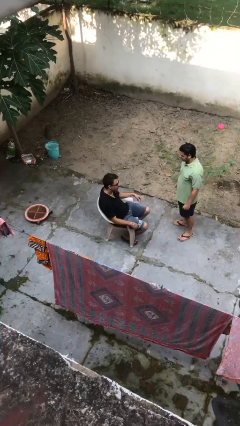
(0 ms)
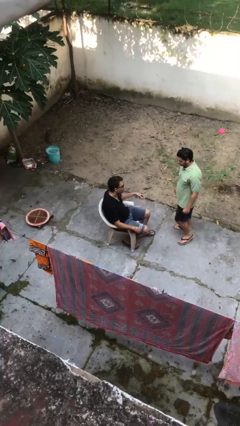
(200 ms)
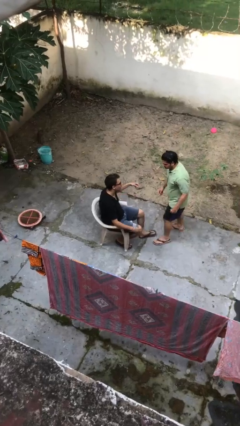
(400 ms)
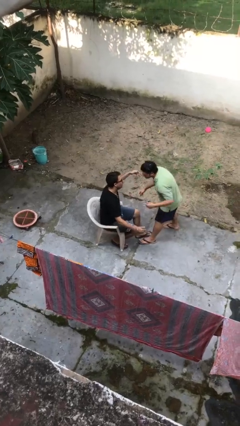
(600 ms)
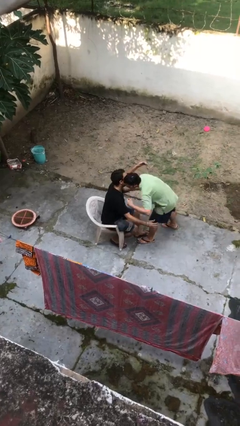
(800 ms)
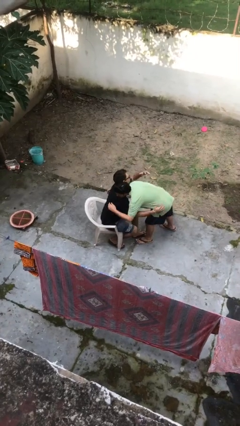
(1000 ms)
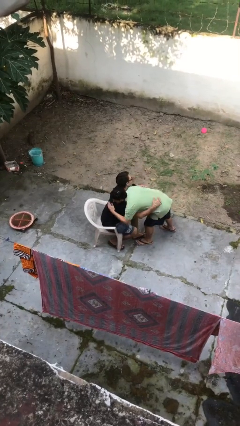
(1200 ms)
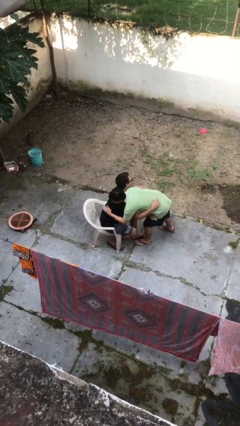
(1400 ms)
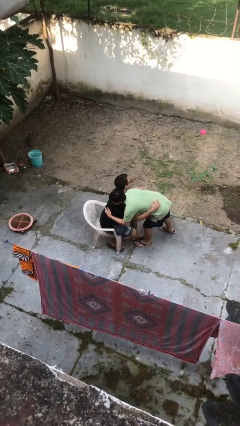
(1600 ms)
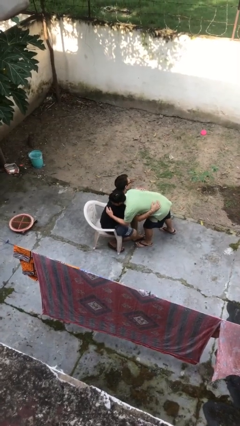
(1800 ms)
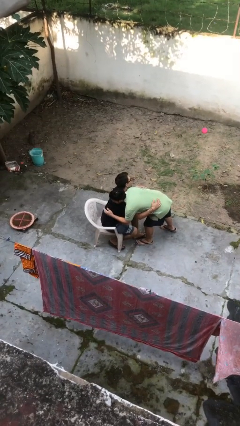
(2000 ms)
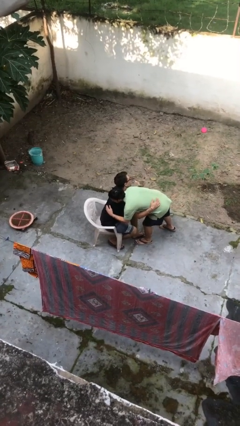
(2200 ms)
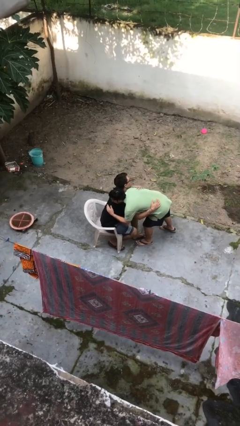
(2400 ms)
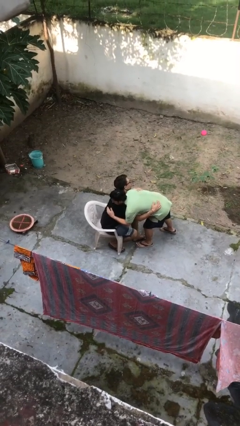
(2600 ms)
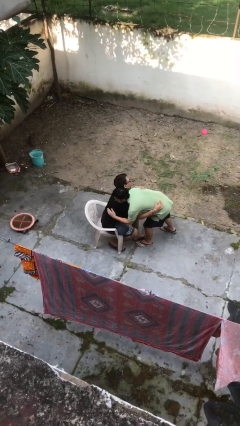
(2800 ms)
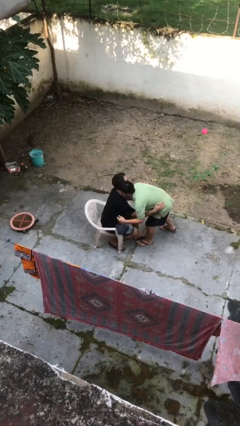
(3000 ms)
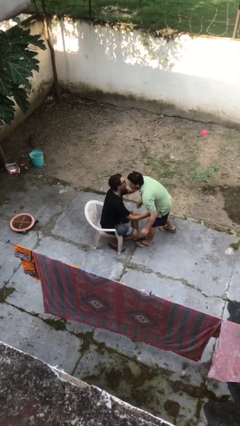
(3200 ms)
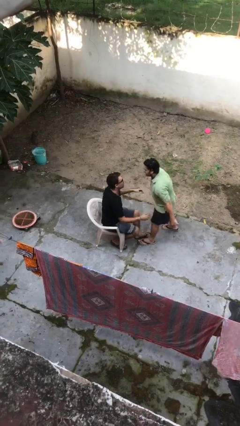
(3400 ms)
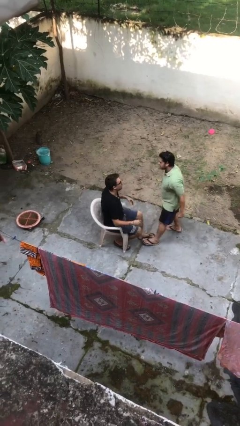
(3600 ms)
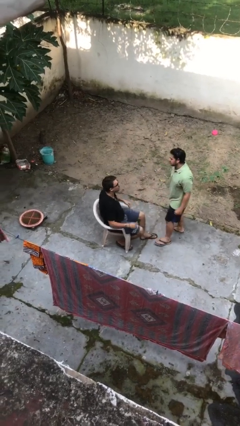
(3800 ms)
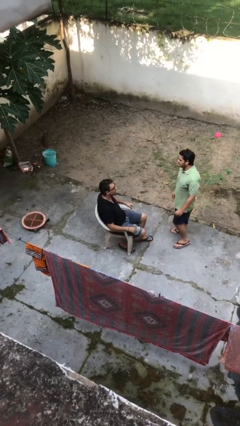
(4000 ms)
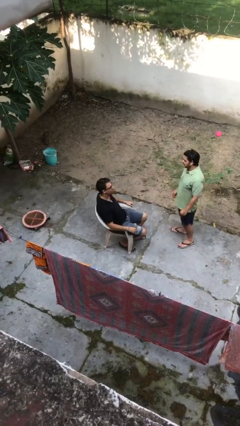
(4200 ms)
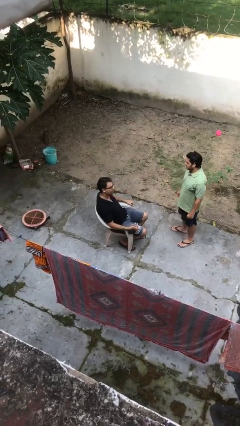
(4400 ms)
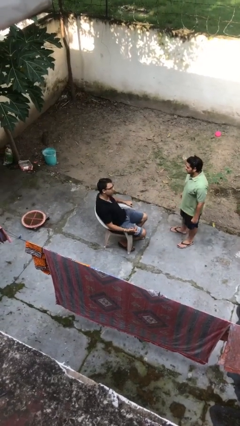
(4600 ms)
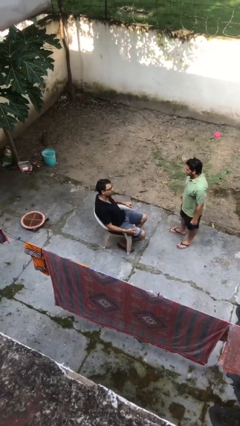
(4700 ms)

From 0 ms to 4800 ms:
person embraces person

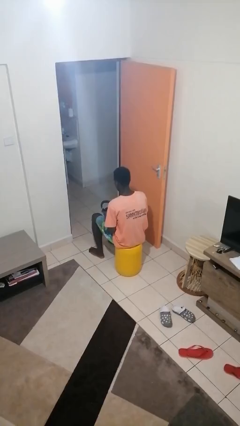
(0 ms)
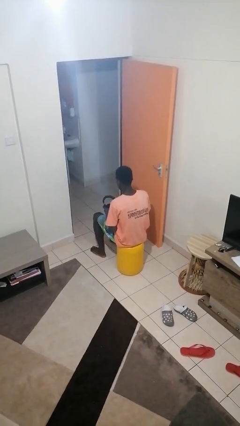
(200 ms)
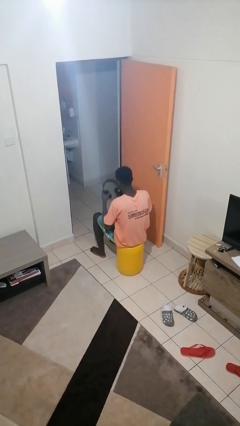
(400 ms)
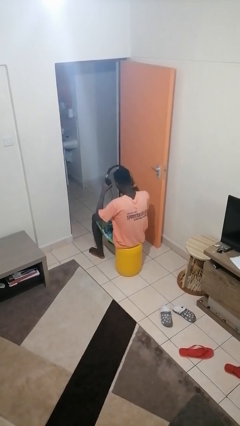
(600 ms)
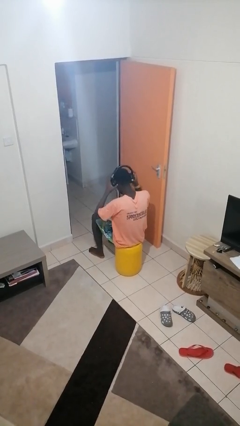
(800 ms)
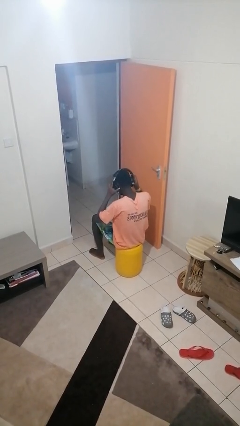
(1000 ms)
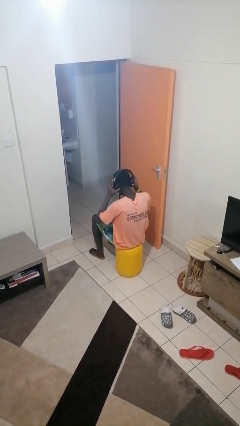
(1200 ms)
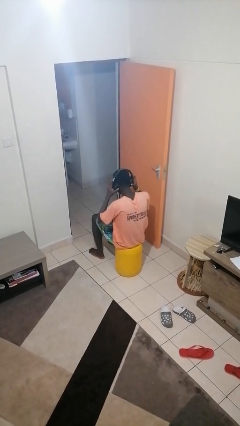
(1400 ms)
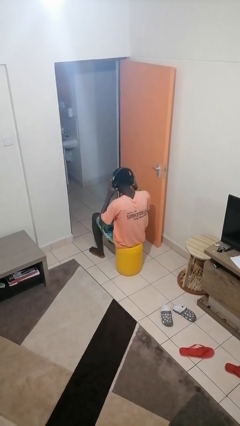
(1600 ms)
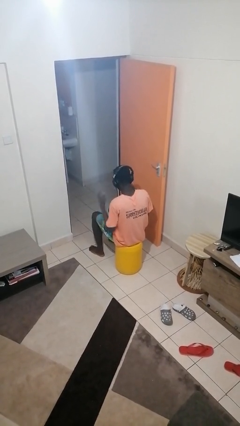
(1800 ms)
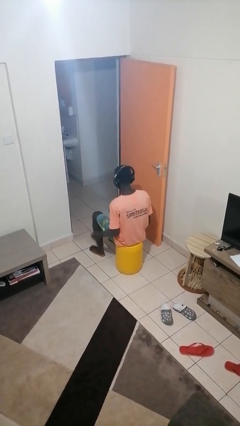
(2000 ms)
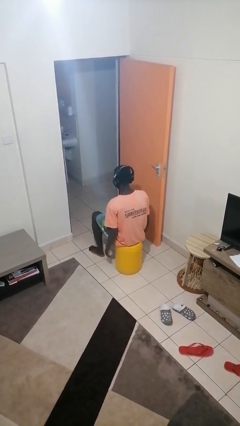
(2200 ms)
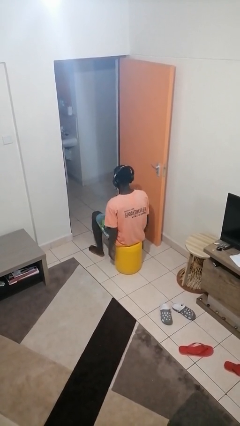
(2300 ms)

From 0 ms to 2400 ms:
person puts on headphones

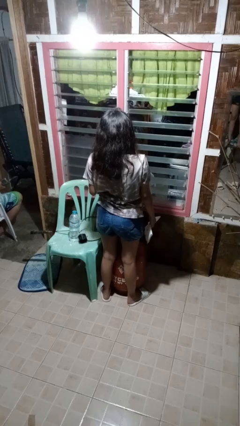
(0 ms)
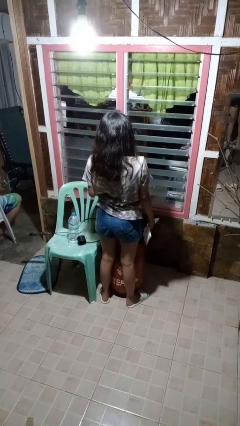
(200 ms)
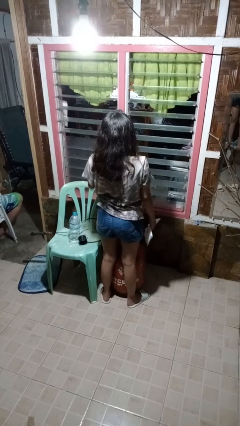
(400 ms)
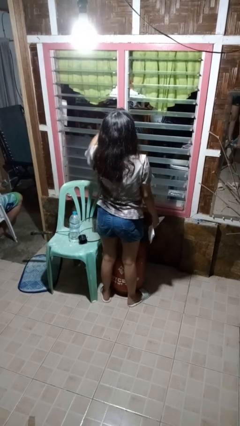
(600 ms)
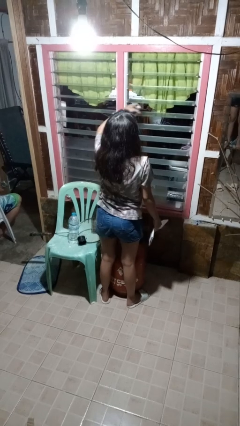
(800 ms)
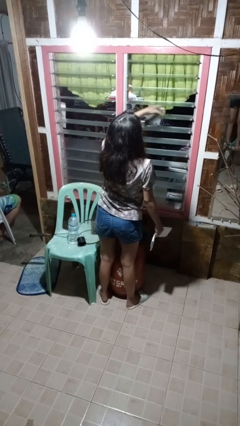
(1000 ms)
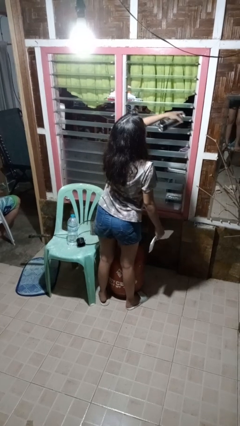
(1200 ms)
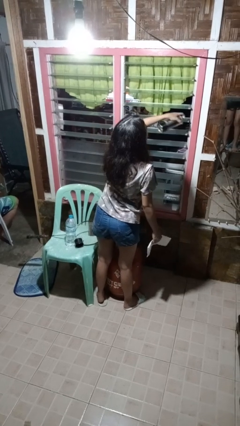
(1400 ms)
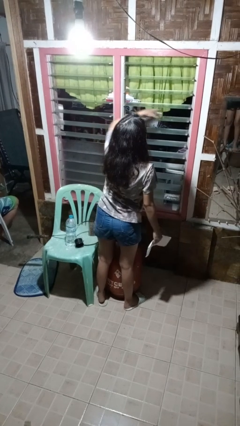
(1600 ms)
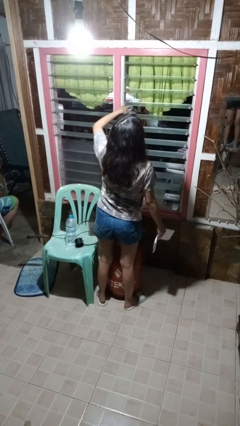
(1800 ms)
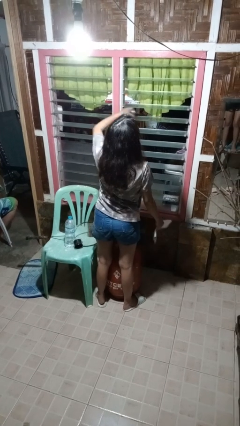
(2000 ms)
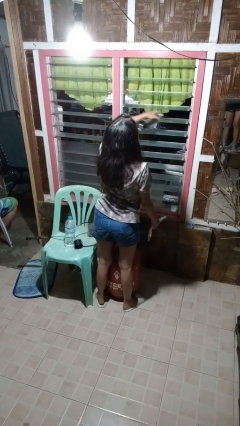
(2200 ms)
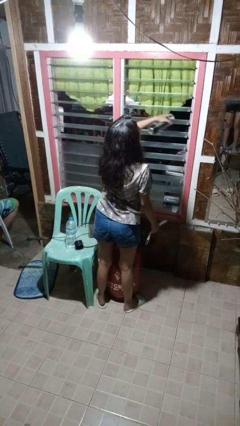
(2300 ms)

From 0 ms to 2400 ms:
person sprays from bottle

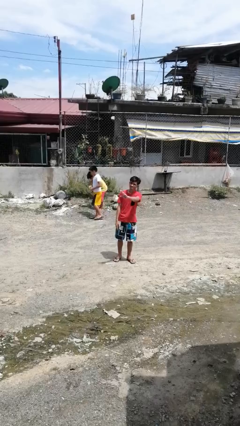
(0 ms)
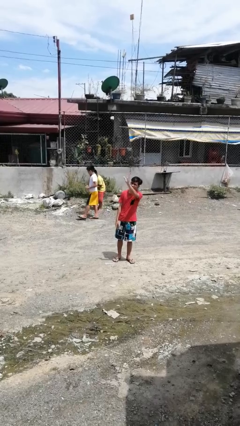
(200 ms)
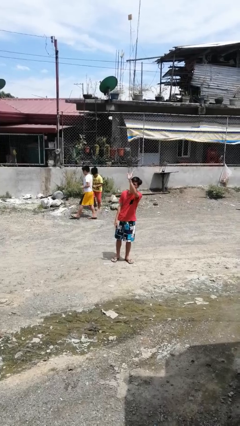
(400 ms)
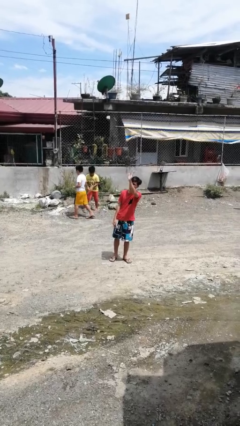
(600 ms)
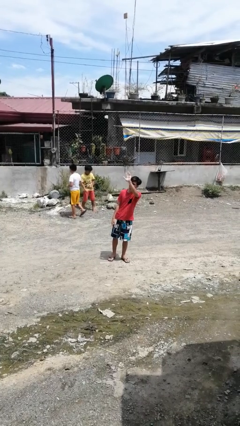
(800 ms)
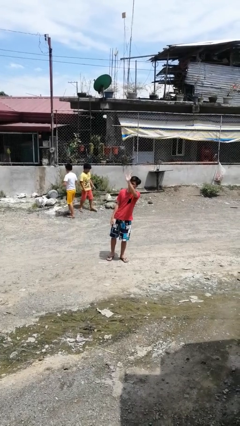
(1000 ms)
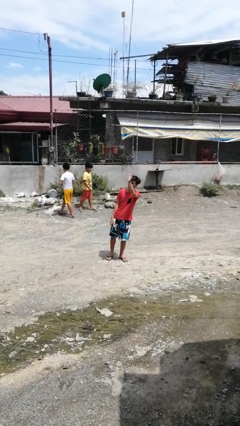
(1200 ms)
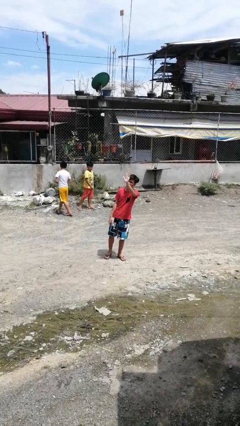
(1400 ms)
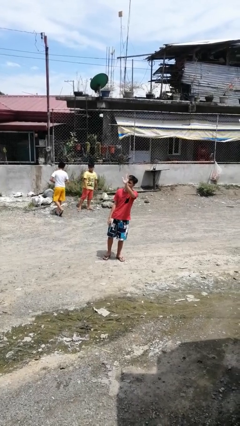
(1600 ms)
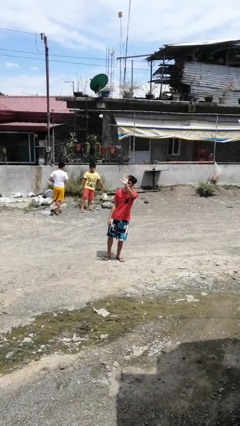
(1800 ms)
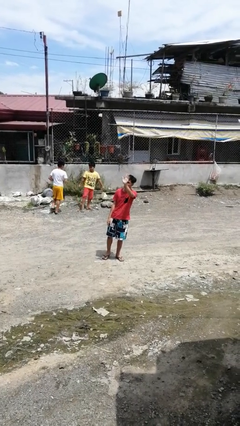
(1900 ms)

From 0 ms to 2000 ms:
person waves at person

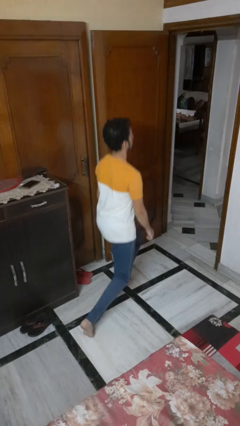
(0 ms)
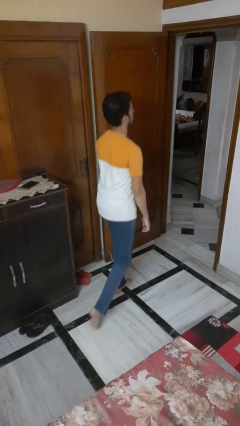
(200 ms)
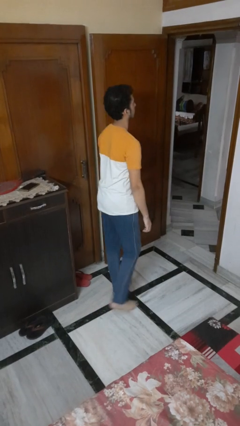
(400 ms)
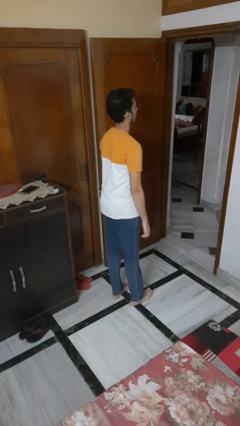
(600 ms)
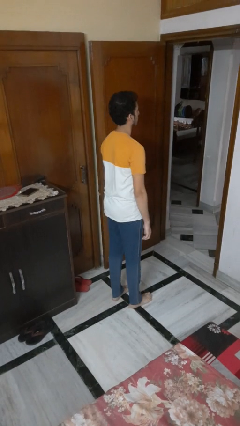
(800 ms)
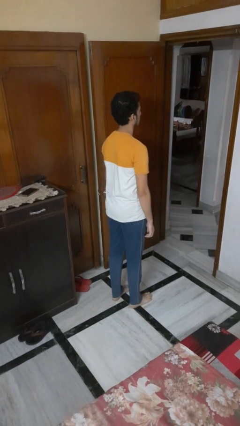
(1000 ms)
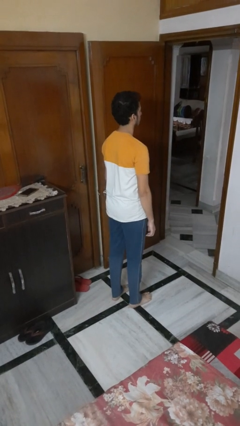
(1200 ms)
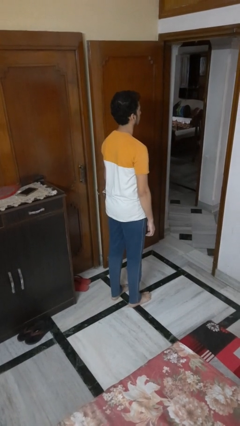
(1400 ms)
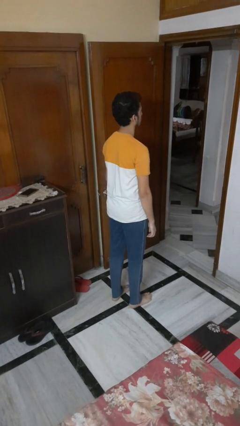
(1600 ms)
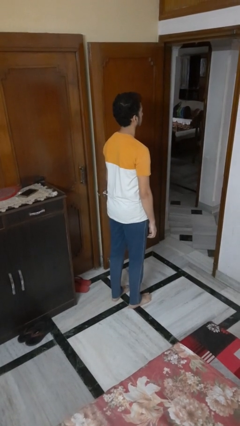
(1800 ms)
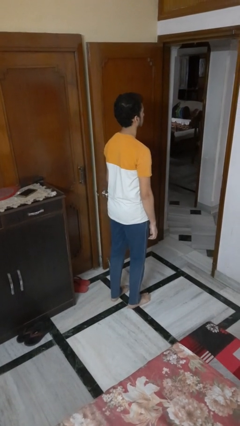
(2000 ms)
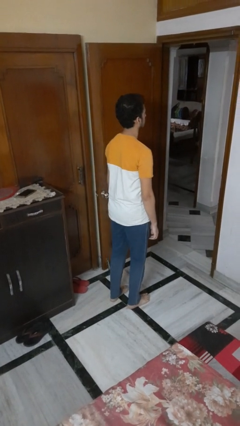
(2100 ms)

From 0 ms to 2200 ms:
person stands up from floor

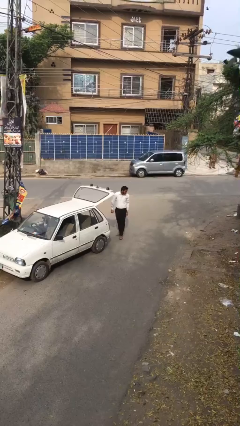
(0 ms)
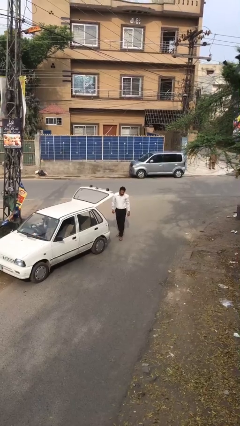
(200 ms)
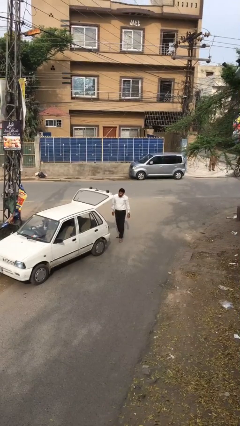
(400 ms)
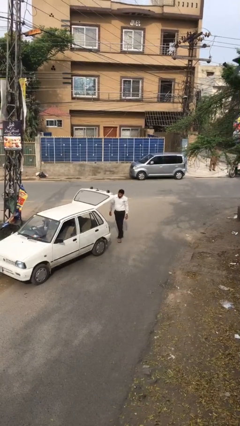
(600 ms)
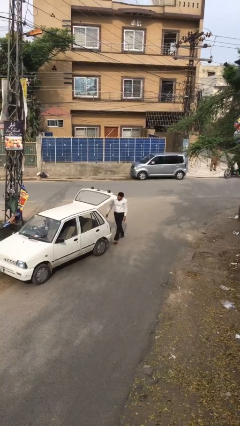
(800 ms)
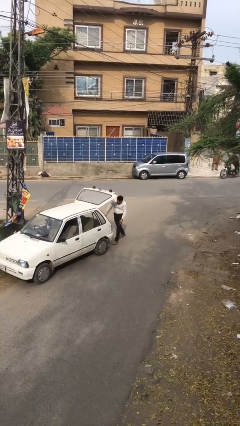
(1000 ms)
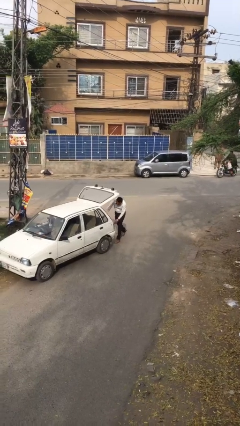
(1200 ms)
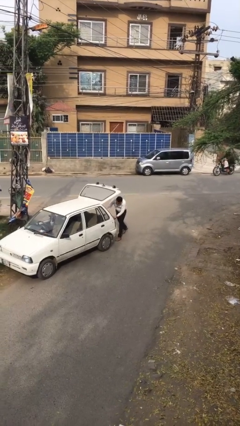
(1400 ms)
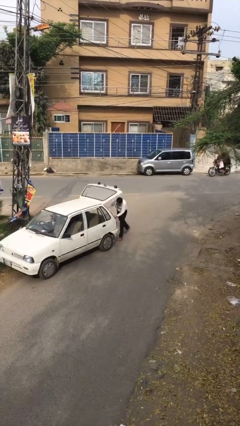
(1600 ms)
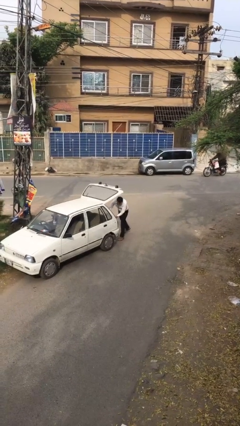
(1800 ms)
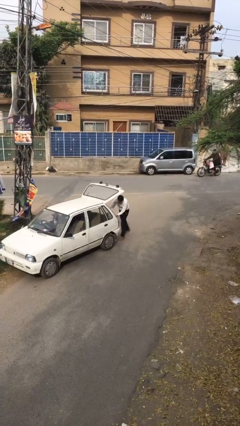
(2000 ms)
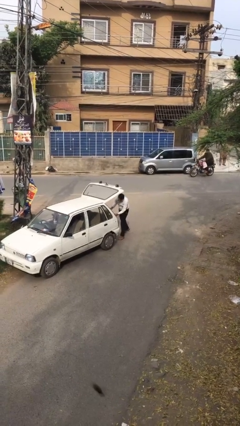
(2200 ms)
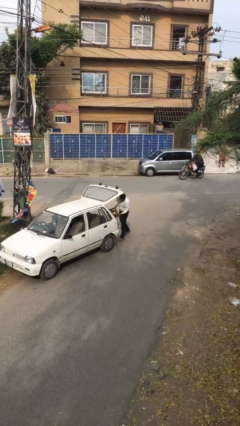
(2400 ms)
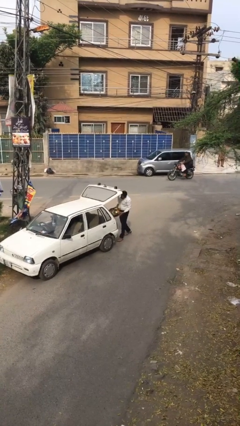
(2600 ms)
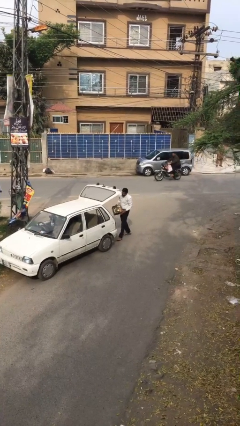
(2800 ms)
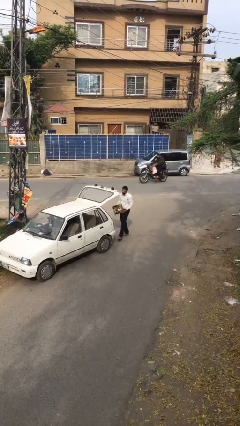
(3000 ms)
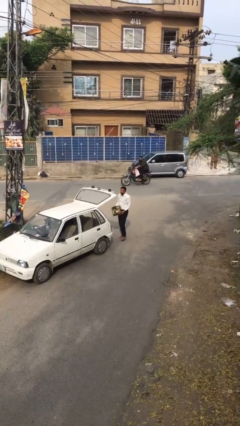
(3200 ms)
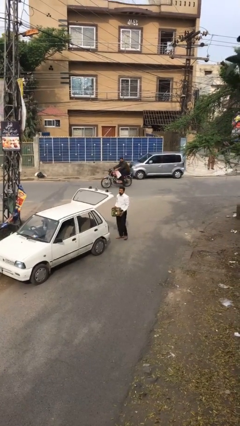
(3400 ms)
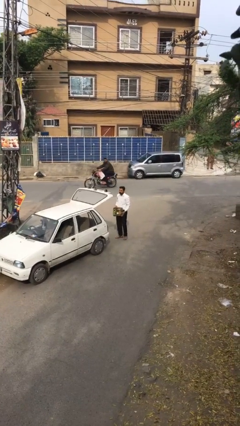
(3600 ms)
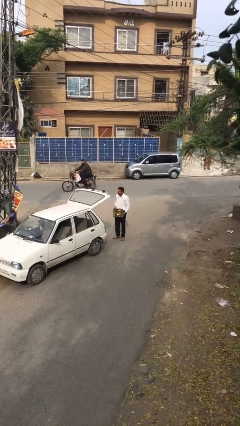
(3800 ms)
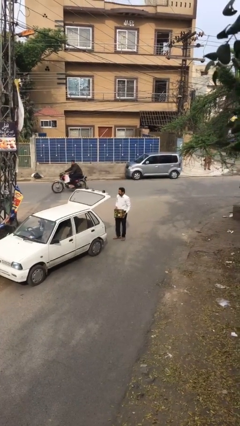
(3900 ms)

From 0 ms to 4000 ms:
person unloads car
